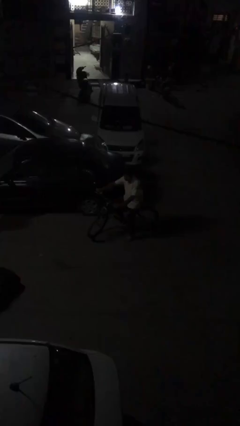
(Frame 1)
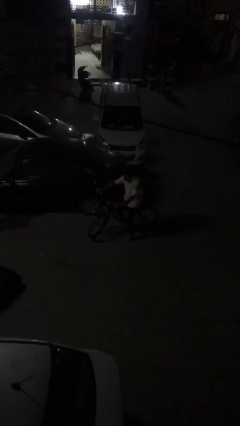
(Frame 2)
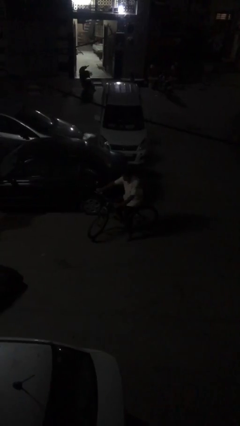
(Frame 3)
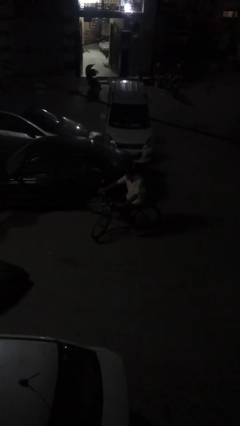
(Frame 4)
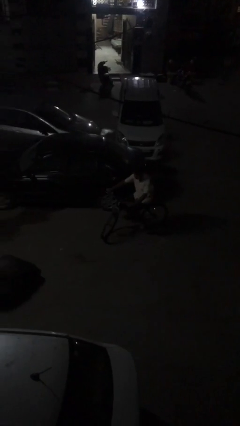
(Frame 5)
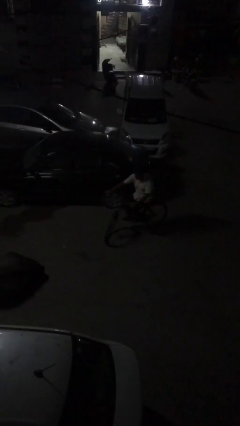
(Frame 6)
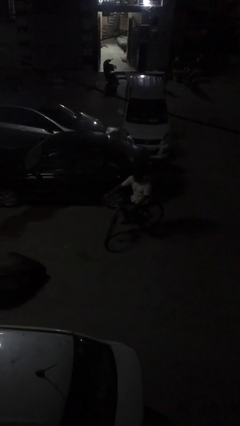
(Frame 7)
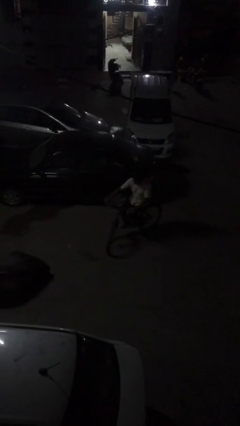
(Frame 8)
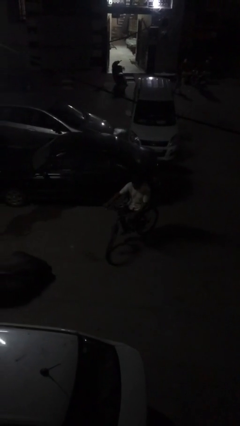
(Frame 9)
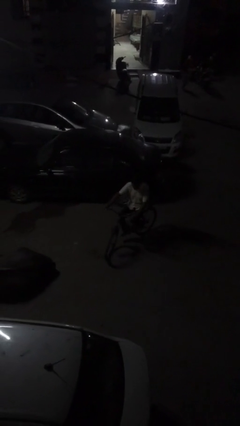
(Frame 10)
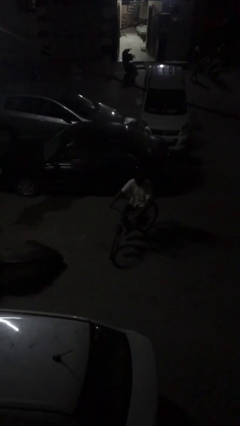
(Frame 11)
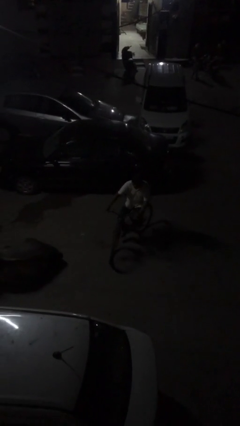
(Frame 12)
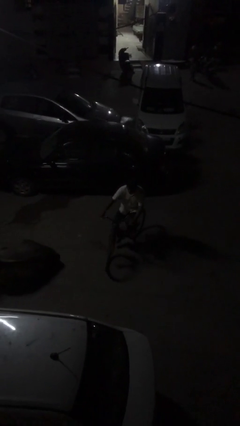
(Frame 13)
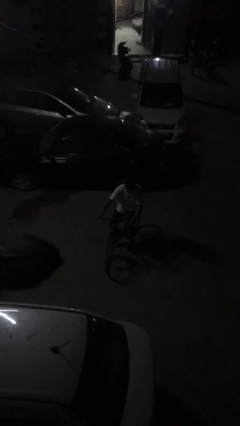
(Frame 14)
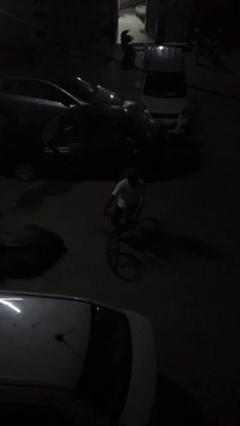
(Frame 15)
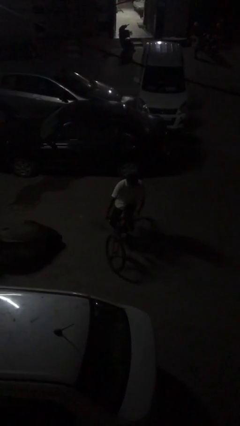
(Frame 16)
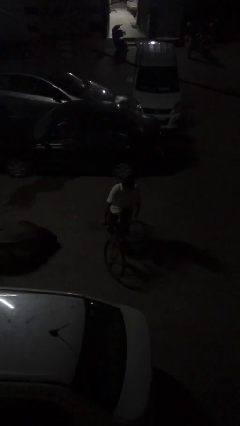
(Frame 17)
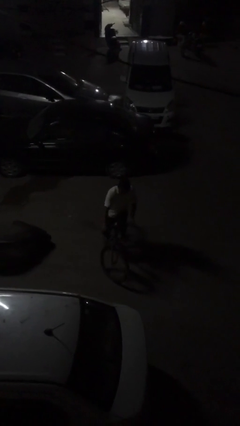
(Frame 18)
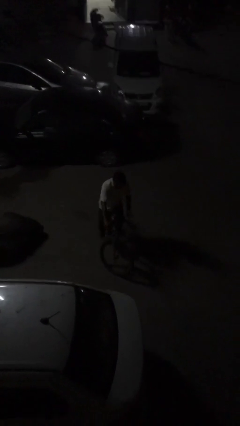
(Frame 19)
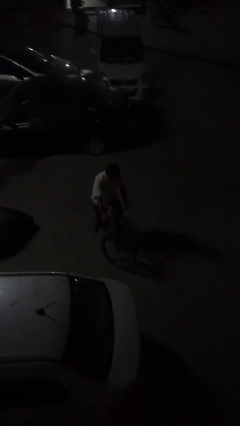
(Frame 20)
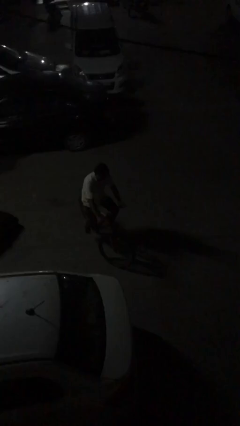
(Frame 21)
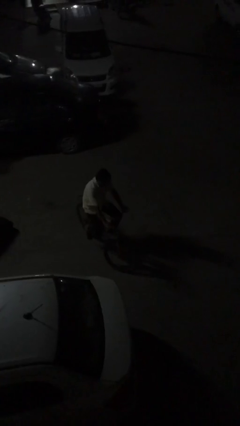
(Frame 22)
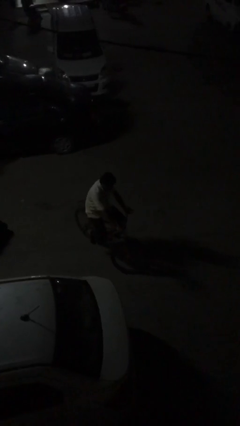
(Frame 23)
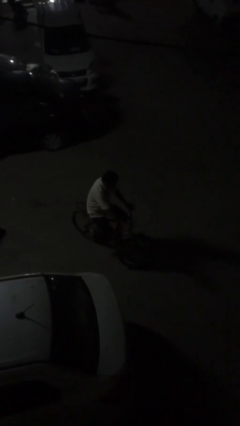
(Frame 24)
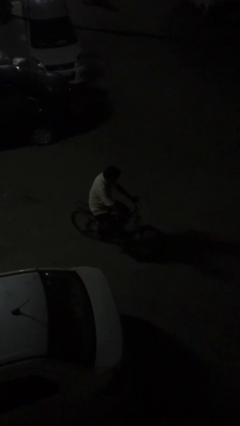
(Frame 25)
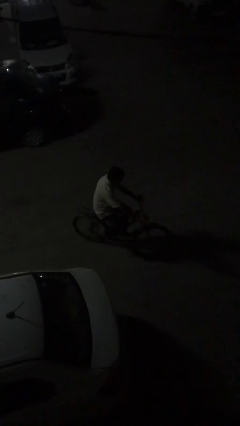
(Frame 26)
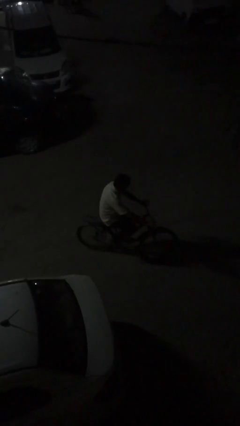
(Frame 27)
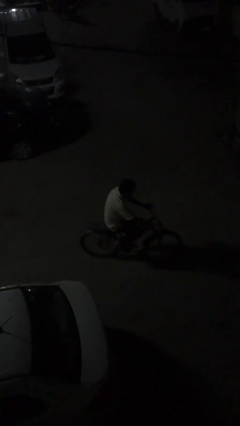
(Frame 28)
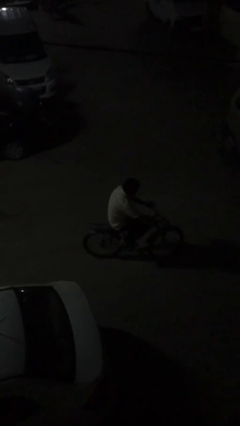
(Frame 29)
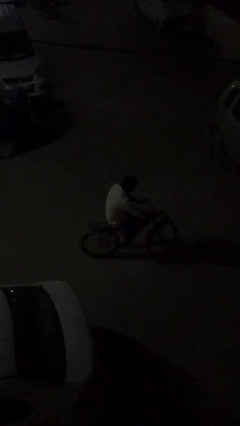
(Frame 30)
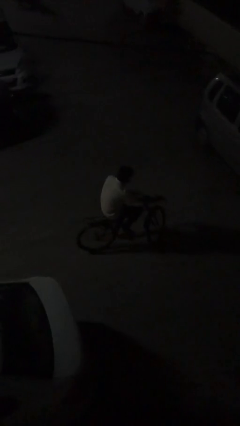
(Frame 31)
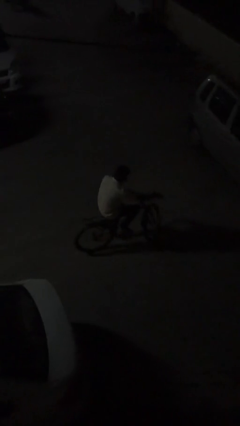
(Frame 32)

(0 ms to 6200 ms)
person rides bicycle

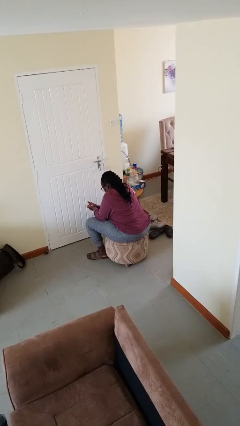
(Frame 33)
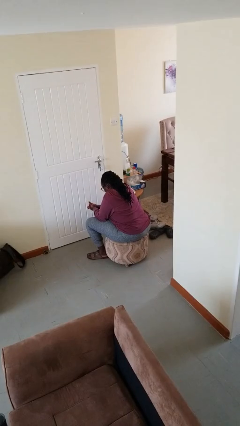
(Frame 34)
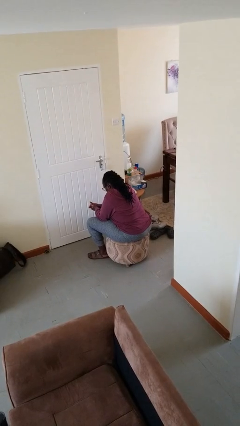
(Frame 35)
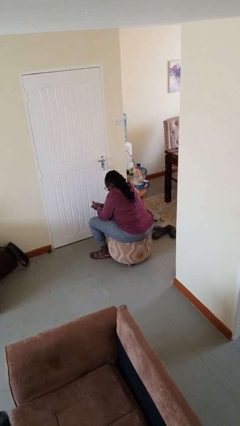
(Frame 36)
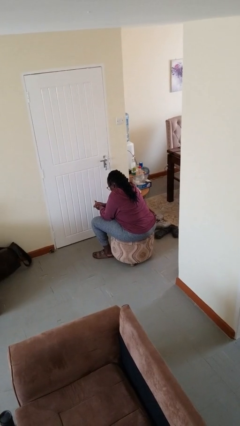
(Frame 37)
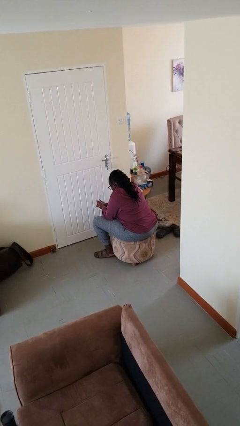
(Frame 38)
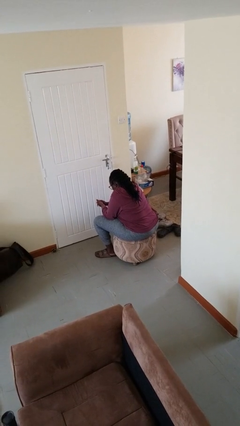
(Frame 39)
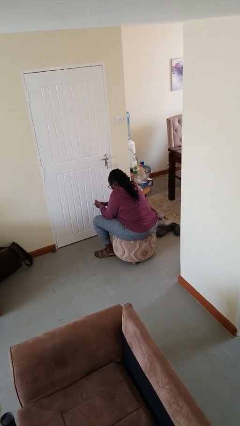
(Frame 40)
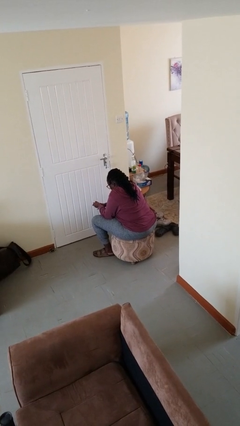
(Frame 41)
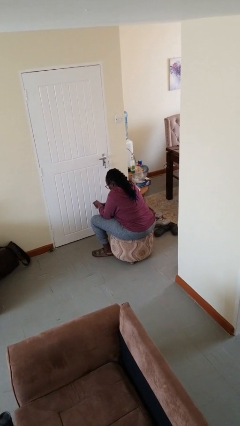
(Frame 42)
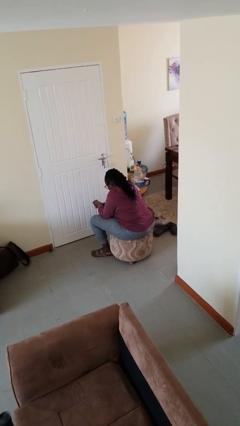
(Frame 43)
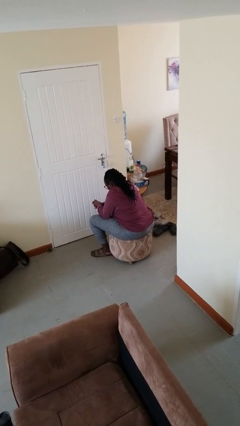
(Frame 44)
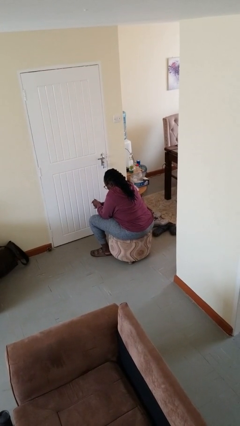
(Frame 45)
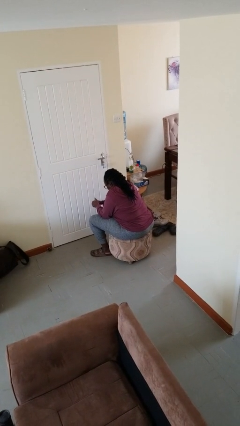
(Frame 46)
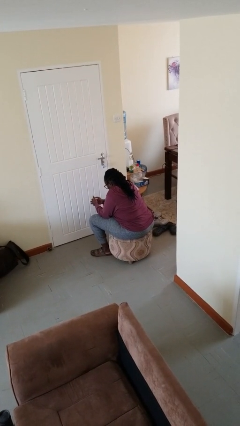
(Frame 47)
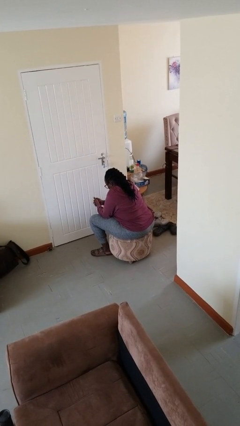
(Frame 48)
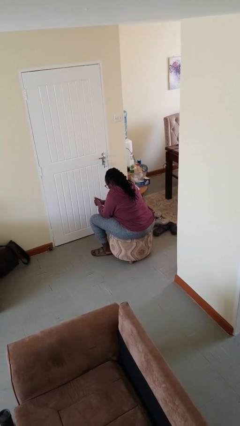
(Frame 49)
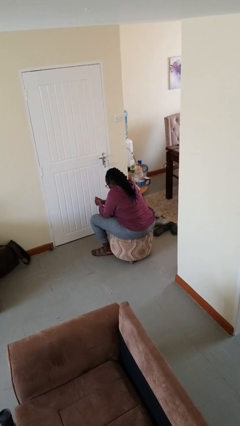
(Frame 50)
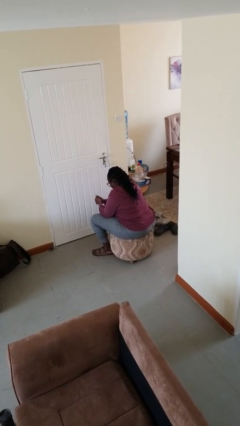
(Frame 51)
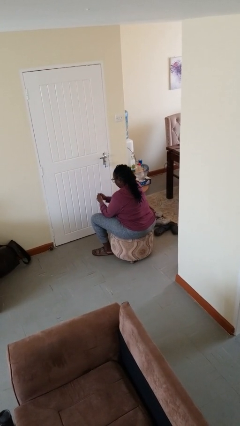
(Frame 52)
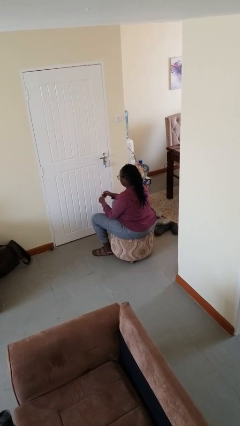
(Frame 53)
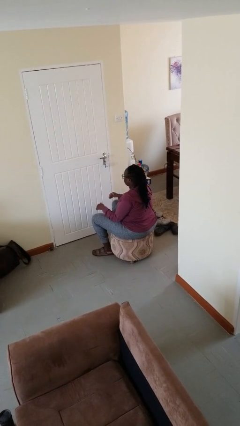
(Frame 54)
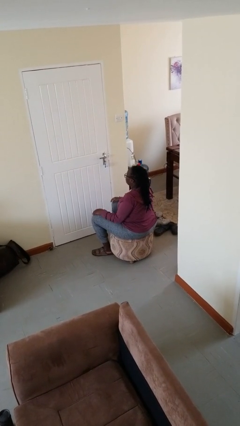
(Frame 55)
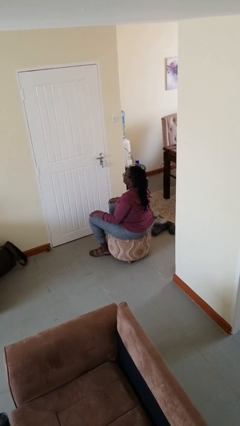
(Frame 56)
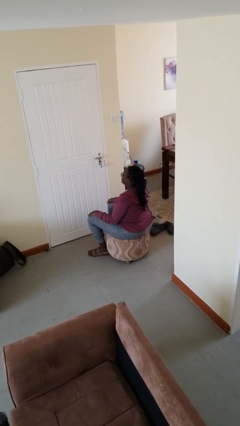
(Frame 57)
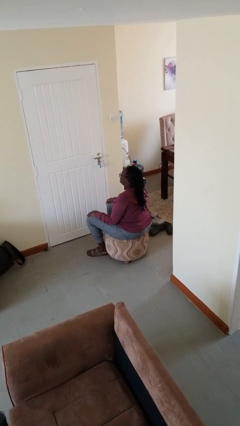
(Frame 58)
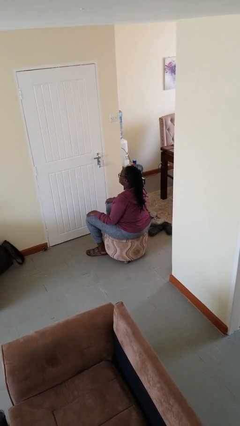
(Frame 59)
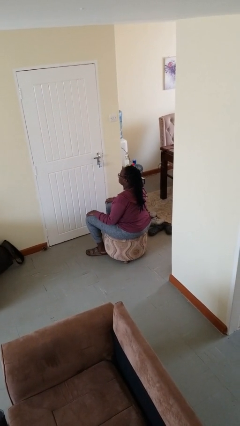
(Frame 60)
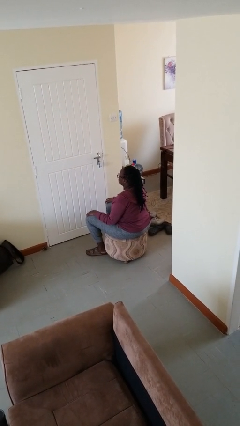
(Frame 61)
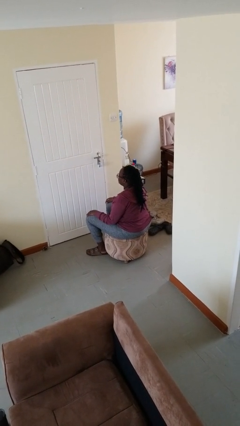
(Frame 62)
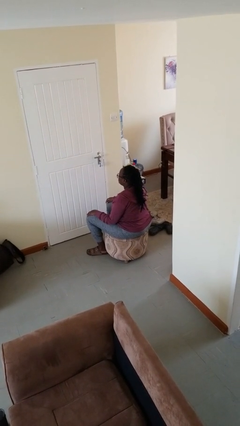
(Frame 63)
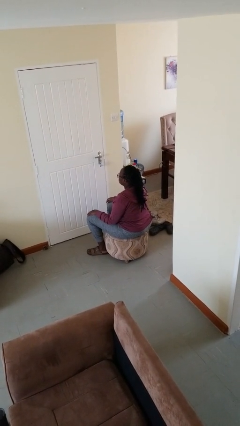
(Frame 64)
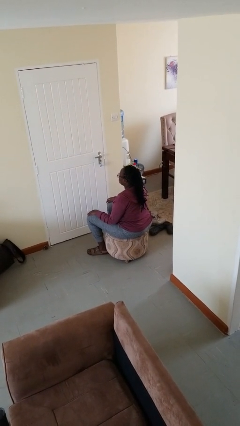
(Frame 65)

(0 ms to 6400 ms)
person looks at hands in lap

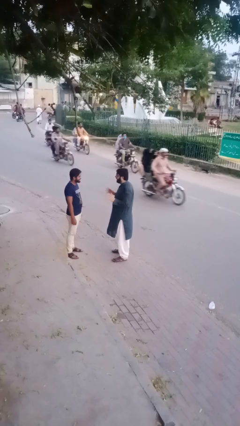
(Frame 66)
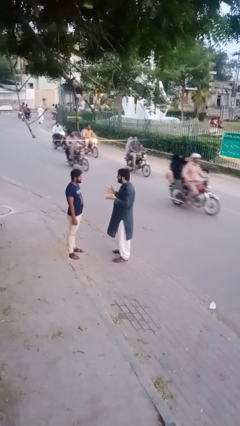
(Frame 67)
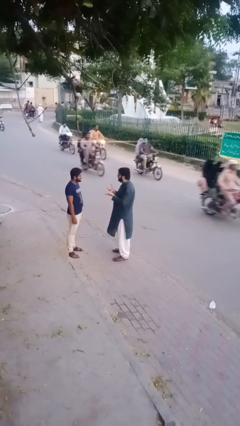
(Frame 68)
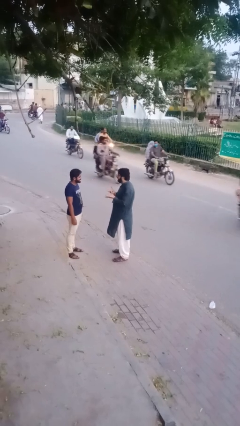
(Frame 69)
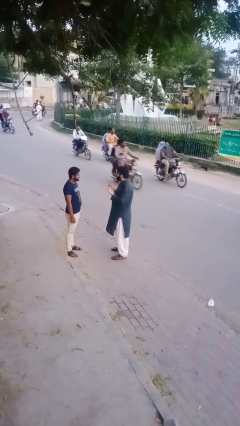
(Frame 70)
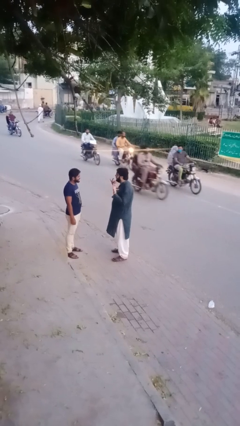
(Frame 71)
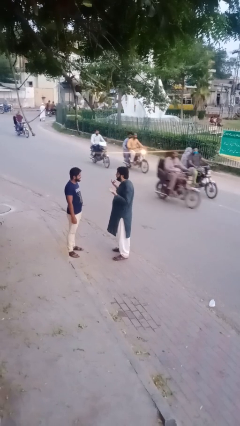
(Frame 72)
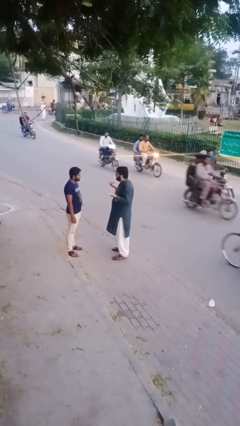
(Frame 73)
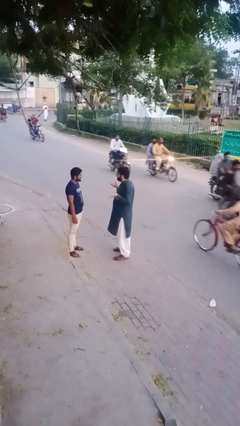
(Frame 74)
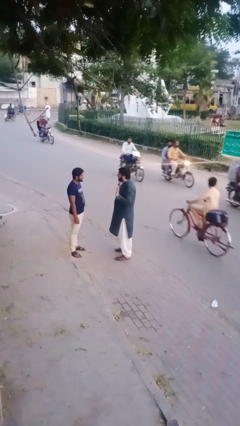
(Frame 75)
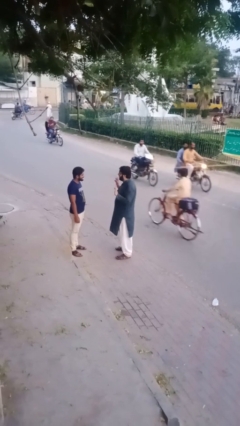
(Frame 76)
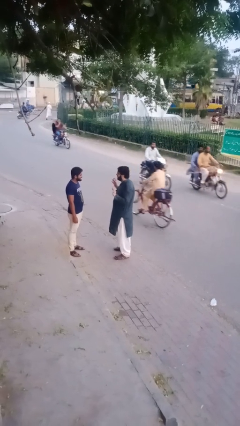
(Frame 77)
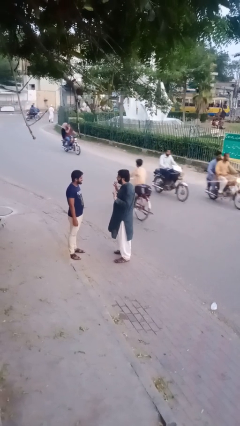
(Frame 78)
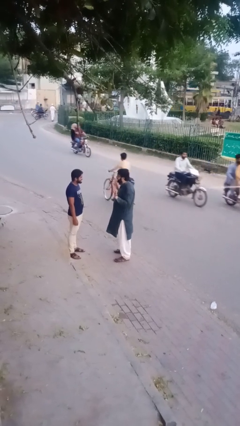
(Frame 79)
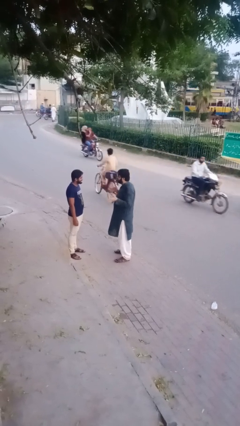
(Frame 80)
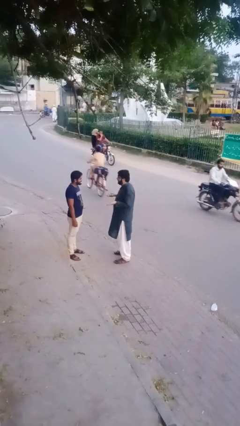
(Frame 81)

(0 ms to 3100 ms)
person talks to person

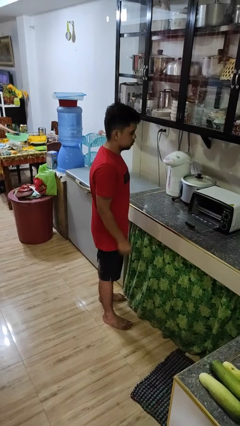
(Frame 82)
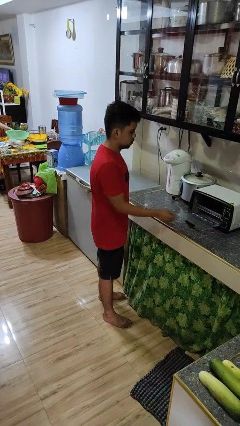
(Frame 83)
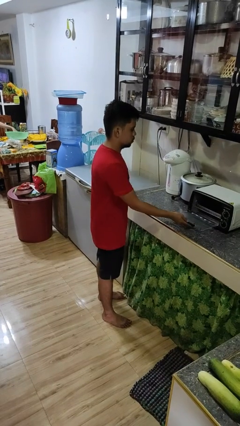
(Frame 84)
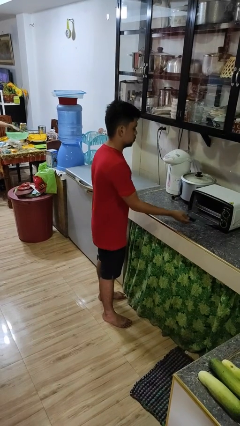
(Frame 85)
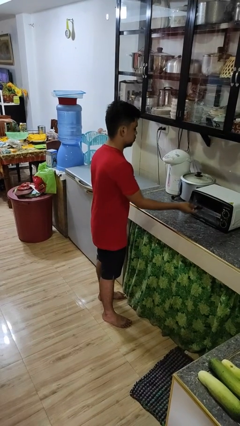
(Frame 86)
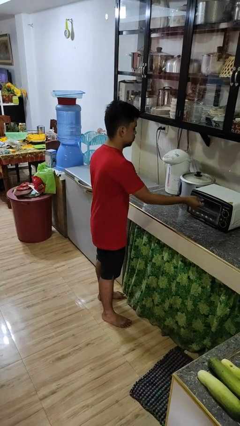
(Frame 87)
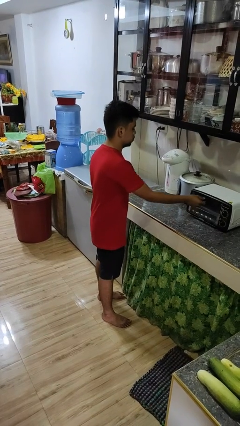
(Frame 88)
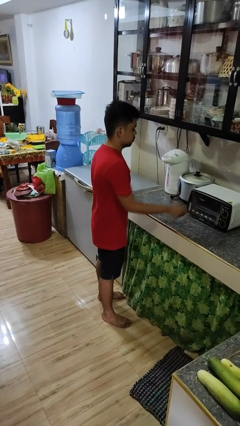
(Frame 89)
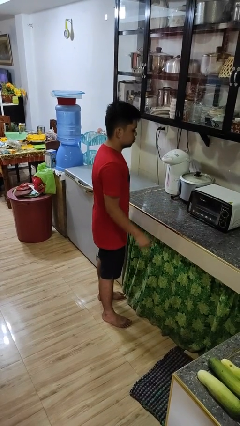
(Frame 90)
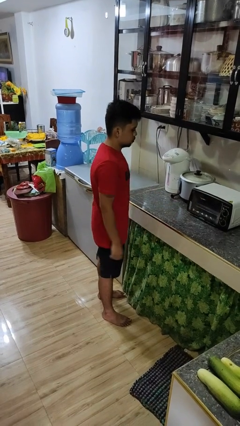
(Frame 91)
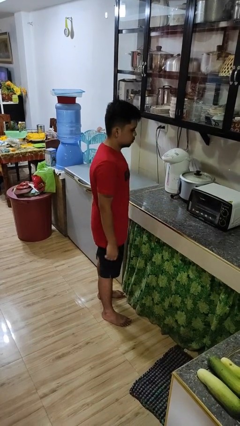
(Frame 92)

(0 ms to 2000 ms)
person closes microwave

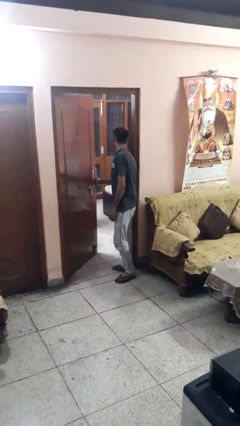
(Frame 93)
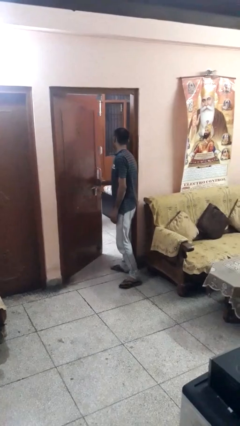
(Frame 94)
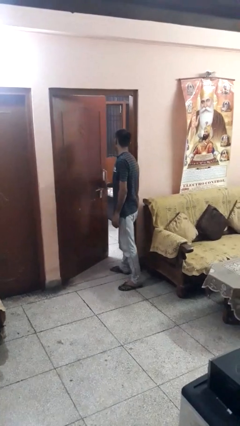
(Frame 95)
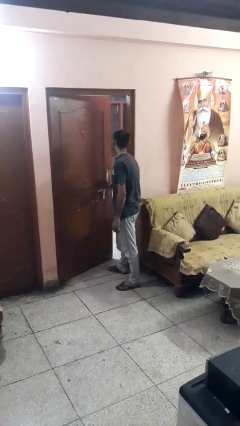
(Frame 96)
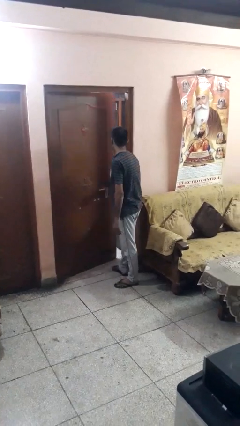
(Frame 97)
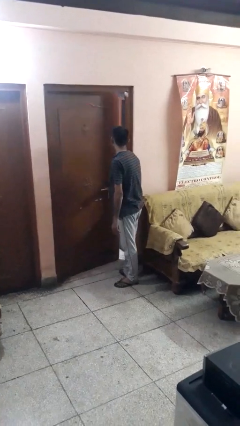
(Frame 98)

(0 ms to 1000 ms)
person closes facility door
